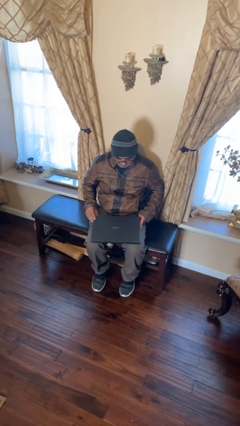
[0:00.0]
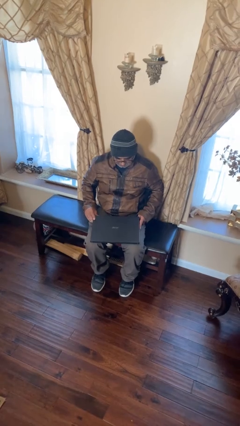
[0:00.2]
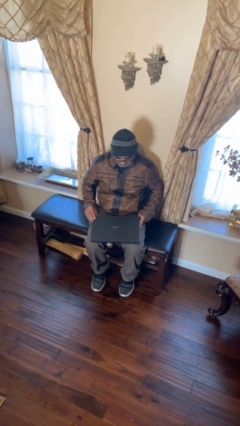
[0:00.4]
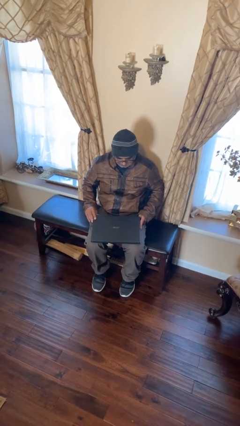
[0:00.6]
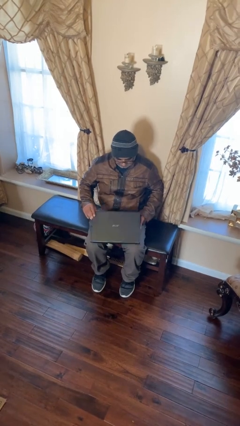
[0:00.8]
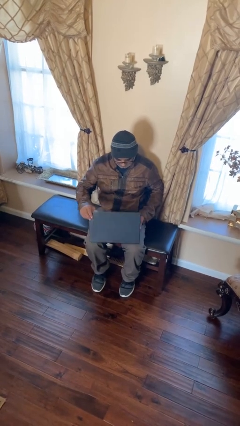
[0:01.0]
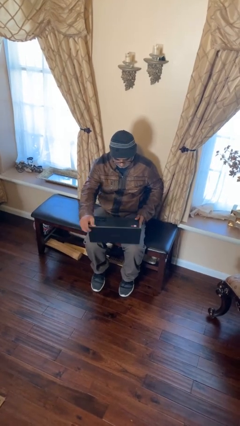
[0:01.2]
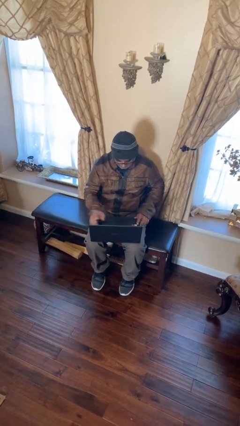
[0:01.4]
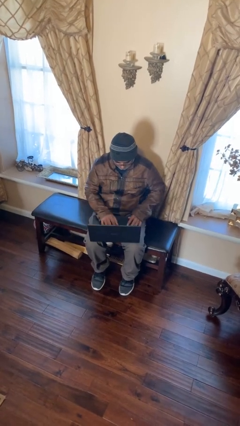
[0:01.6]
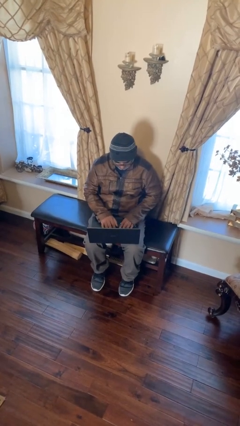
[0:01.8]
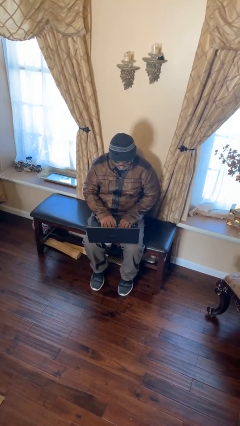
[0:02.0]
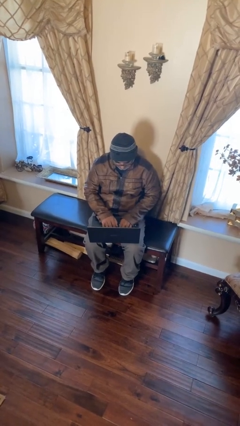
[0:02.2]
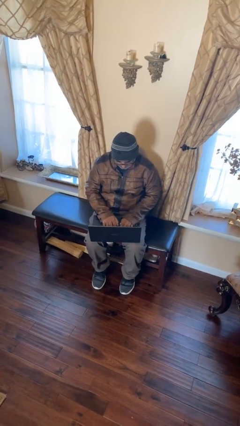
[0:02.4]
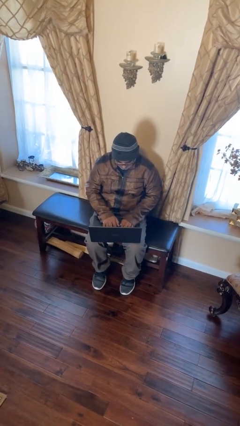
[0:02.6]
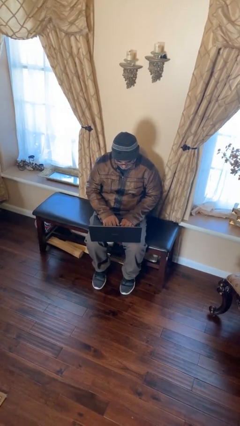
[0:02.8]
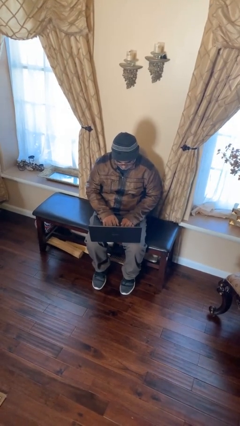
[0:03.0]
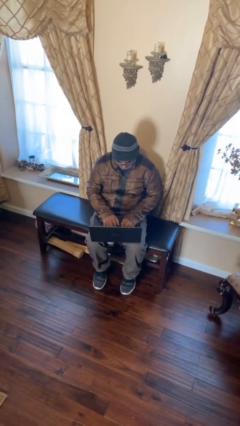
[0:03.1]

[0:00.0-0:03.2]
person interacts with laptop

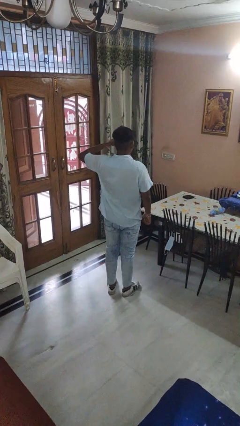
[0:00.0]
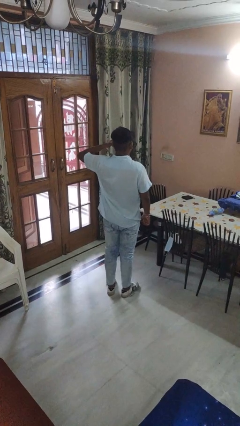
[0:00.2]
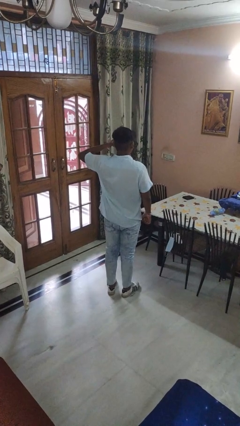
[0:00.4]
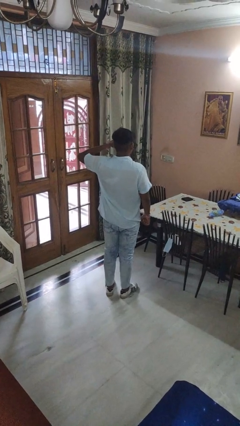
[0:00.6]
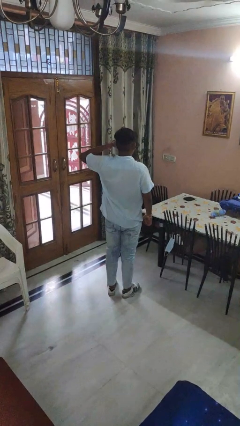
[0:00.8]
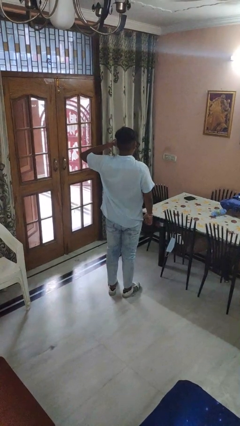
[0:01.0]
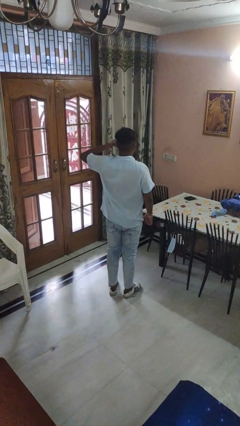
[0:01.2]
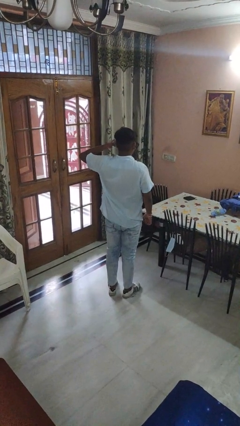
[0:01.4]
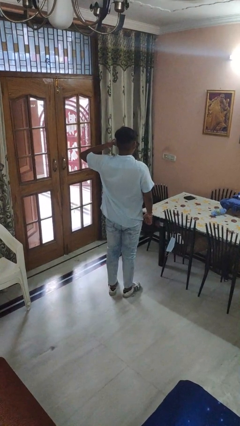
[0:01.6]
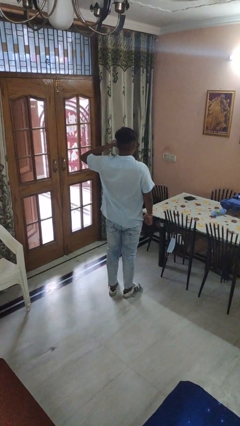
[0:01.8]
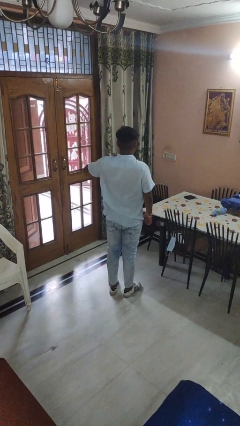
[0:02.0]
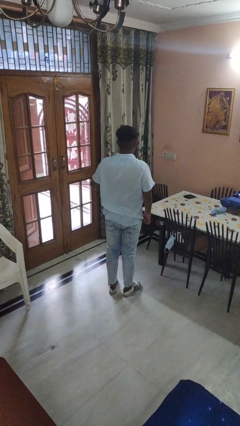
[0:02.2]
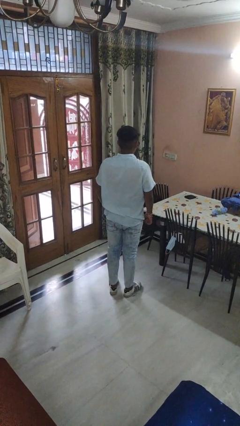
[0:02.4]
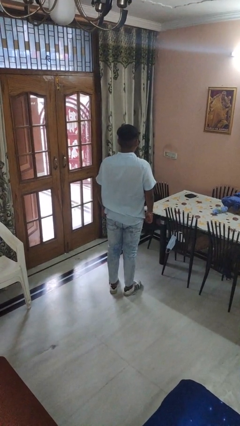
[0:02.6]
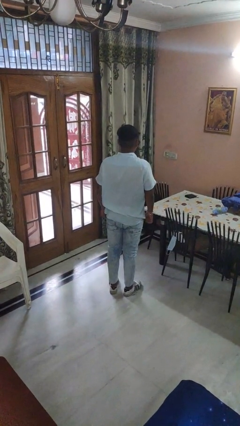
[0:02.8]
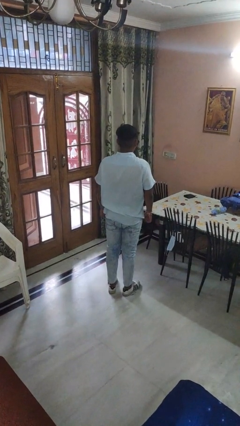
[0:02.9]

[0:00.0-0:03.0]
person gestures call me

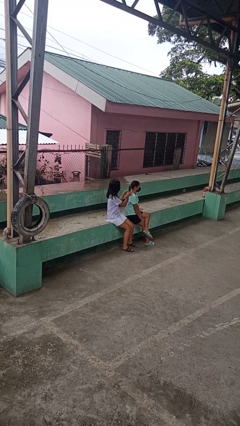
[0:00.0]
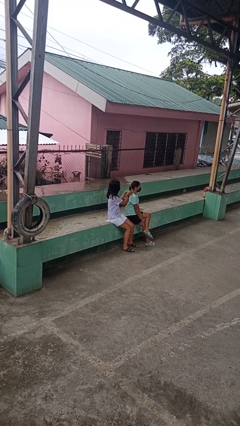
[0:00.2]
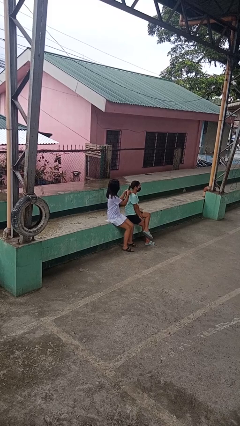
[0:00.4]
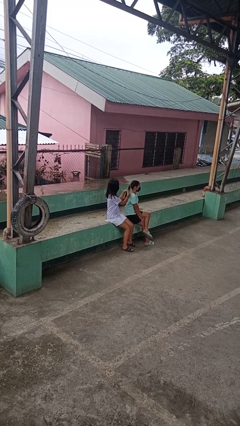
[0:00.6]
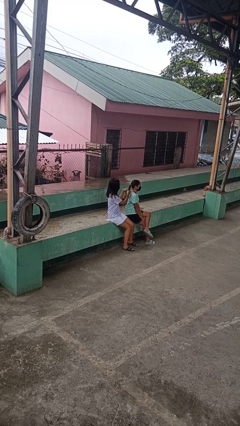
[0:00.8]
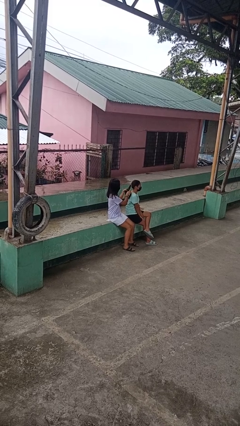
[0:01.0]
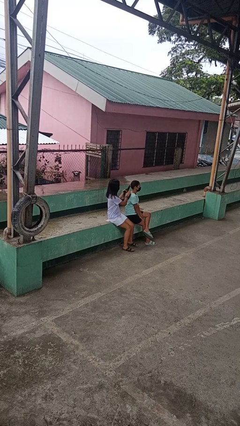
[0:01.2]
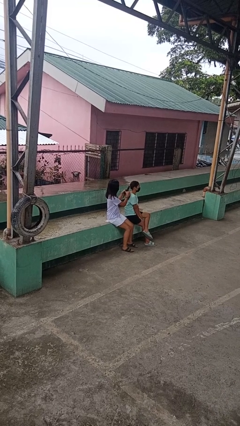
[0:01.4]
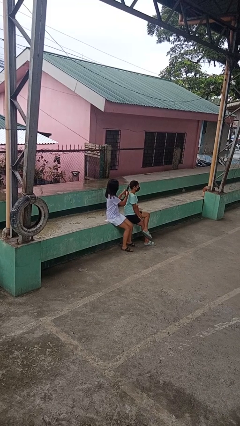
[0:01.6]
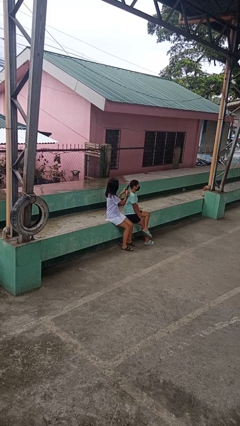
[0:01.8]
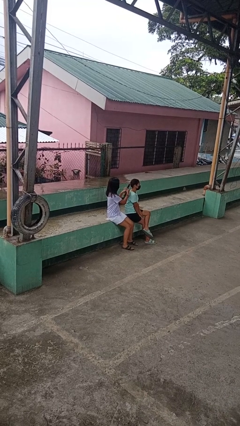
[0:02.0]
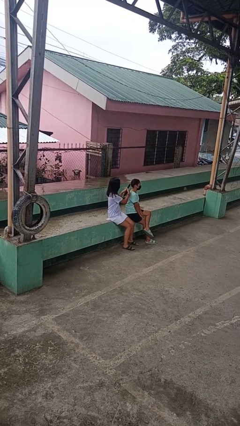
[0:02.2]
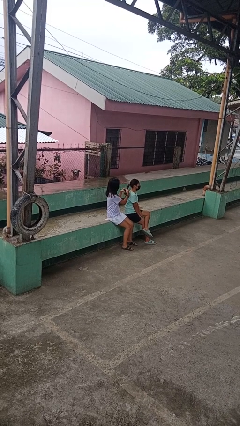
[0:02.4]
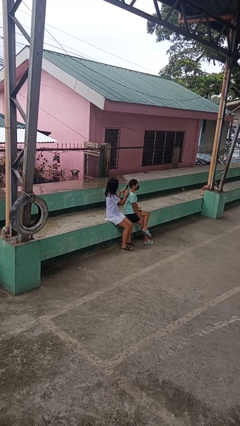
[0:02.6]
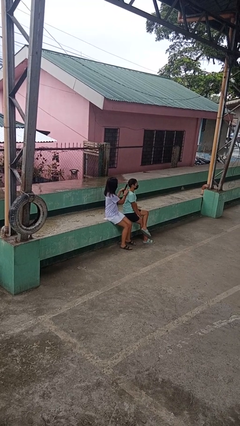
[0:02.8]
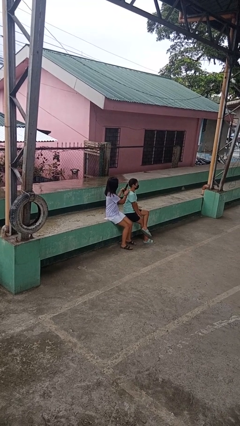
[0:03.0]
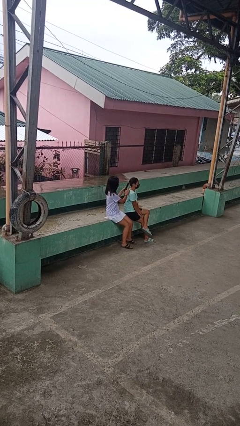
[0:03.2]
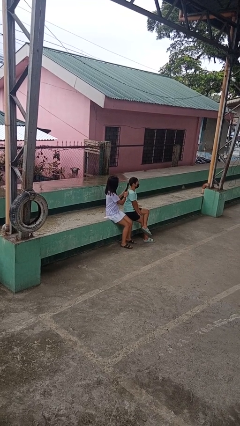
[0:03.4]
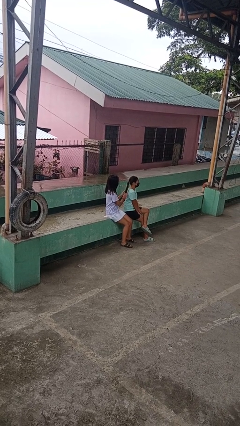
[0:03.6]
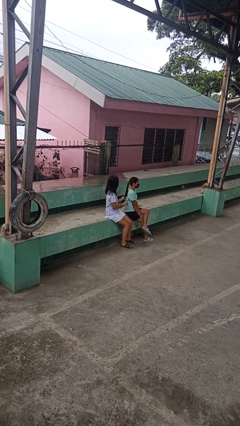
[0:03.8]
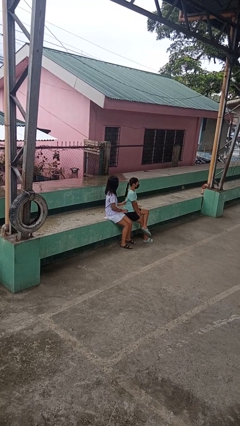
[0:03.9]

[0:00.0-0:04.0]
person braids hair of person

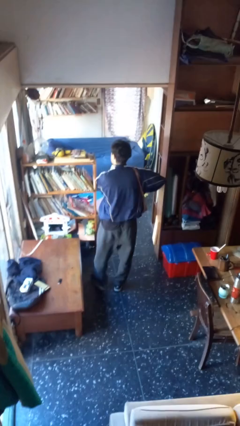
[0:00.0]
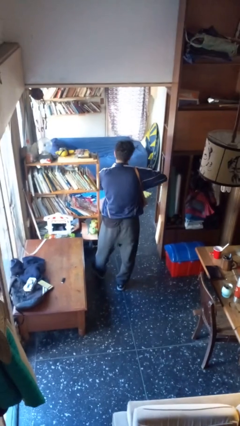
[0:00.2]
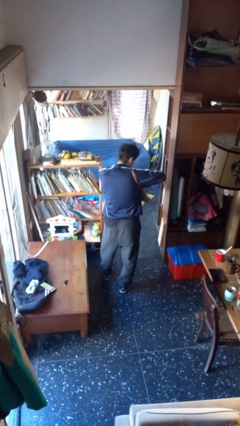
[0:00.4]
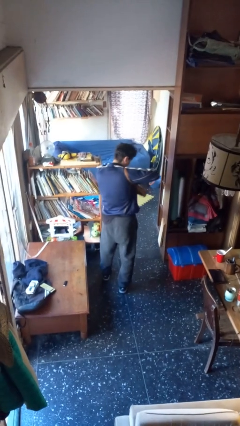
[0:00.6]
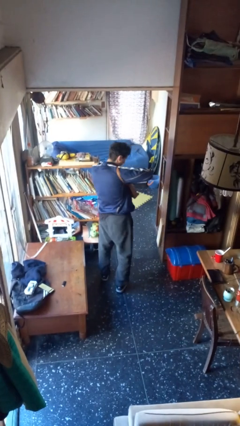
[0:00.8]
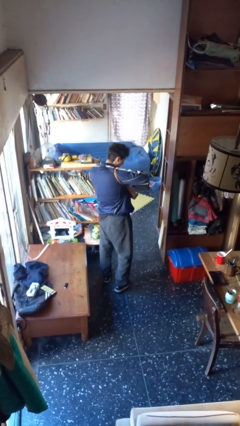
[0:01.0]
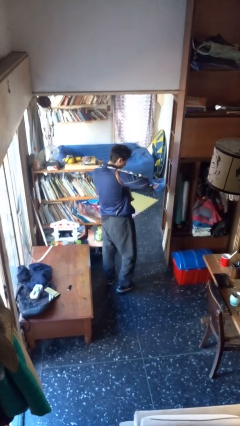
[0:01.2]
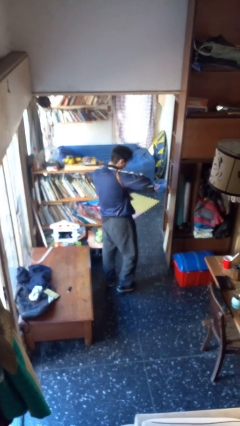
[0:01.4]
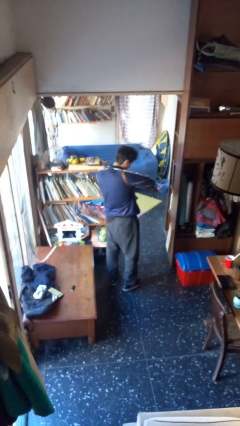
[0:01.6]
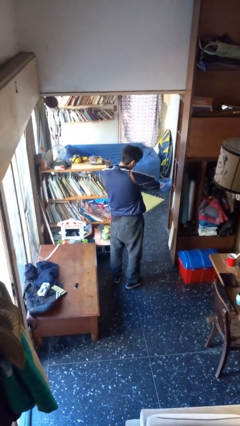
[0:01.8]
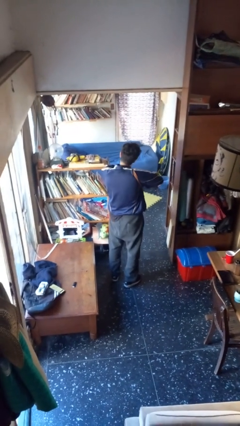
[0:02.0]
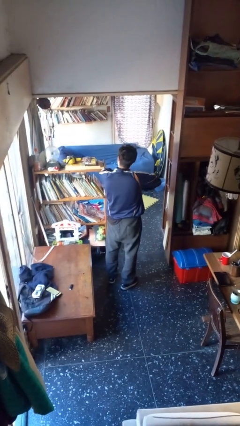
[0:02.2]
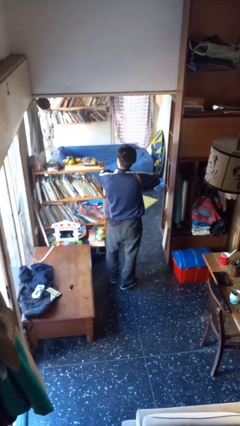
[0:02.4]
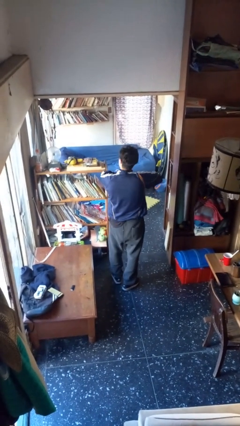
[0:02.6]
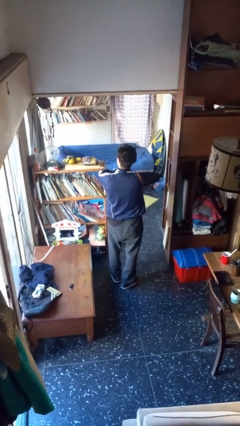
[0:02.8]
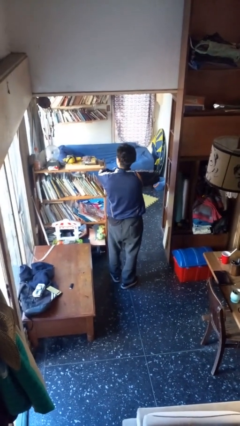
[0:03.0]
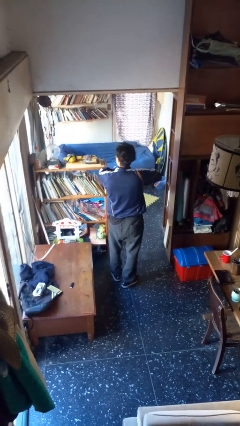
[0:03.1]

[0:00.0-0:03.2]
person searches in purse

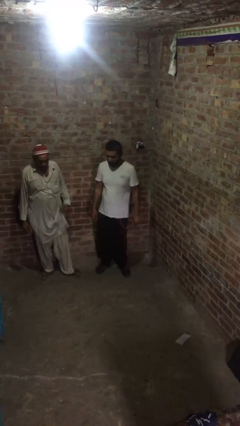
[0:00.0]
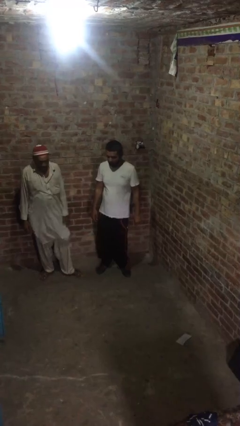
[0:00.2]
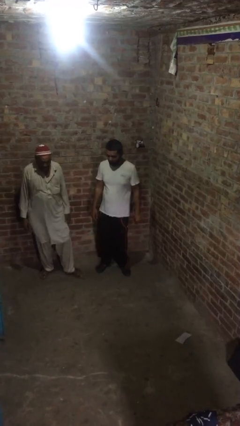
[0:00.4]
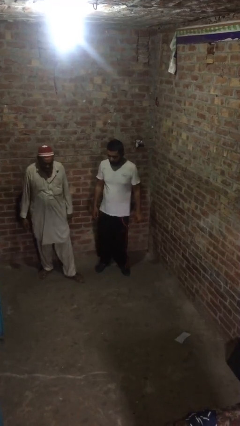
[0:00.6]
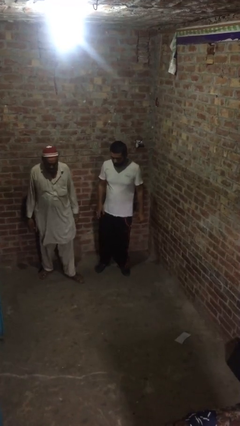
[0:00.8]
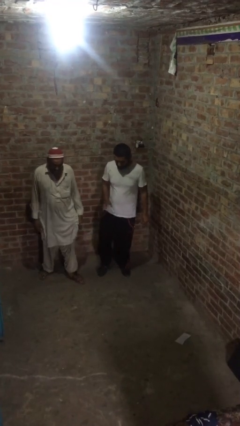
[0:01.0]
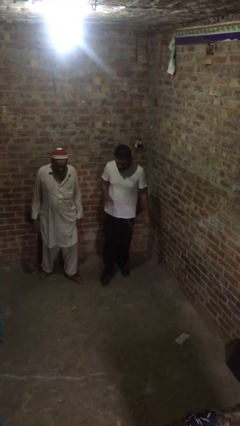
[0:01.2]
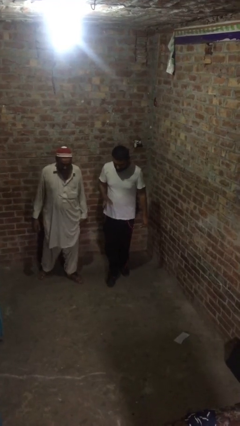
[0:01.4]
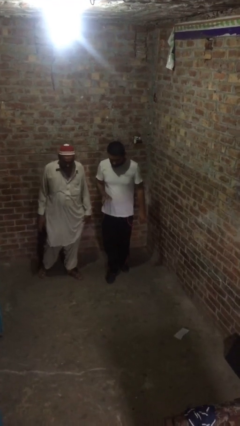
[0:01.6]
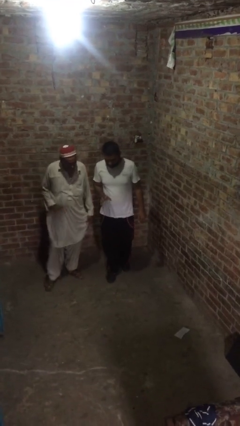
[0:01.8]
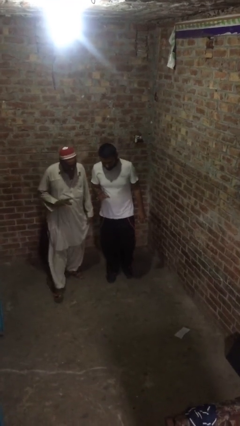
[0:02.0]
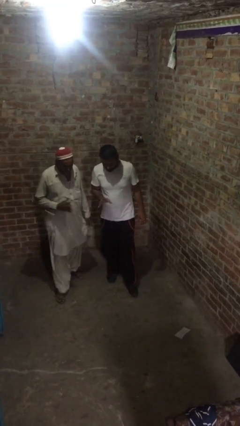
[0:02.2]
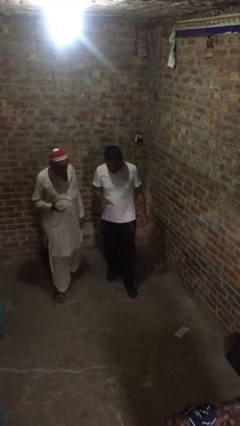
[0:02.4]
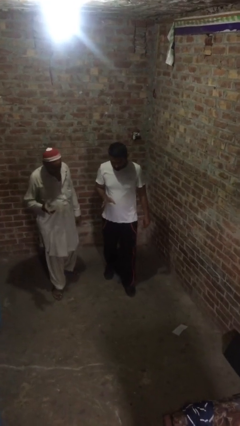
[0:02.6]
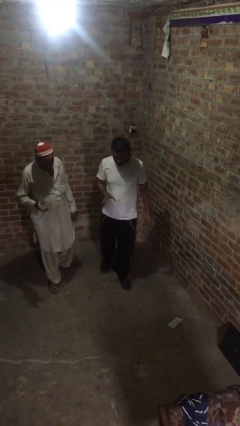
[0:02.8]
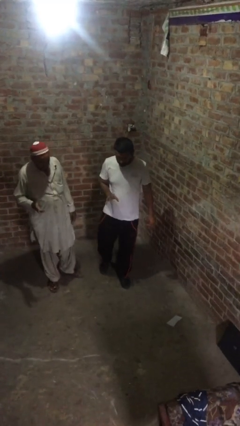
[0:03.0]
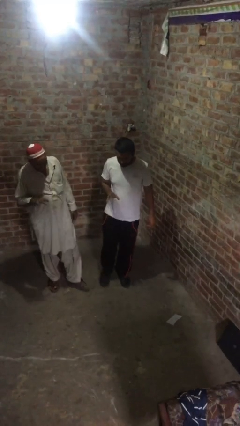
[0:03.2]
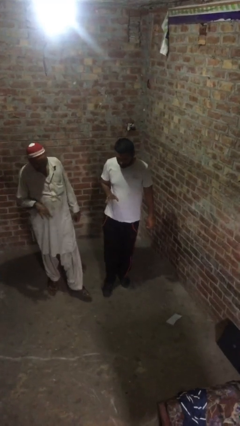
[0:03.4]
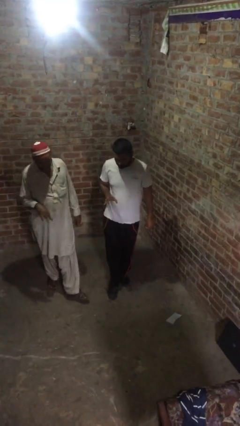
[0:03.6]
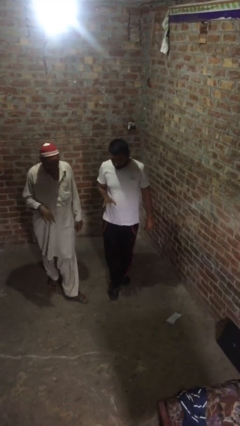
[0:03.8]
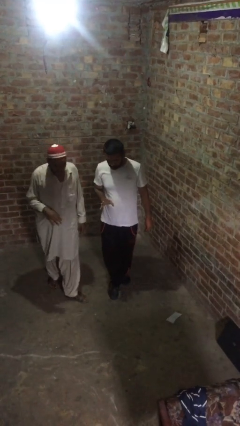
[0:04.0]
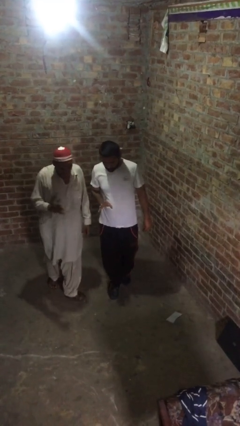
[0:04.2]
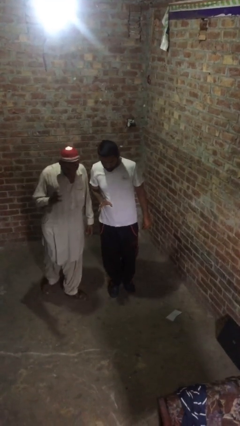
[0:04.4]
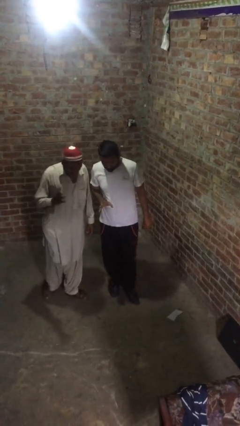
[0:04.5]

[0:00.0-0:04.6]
person talks to person
